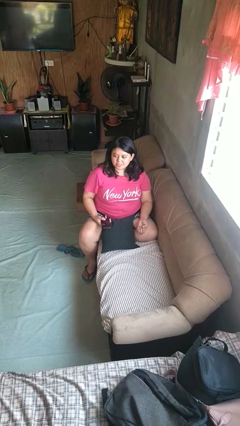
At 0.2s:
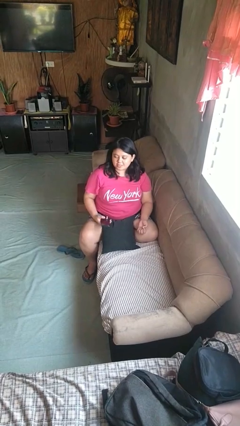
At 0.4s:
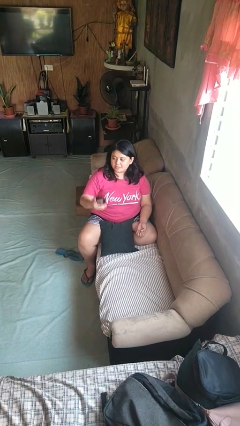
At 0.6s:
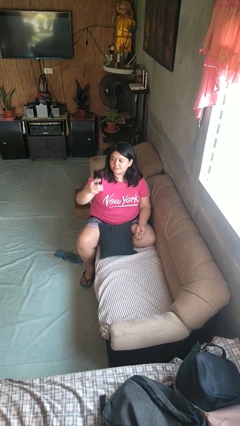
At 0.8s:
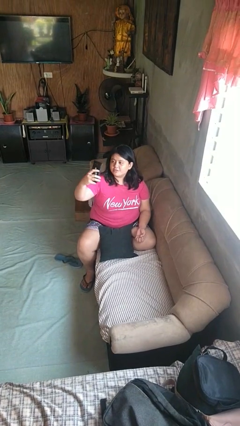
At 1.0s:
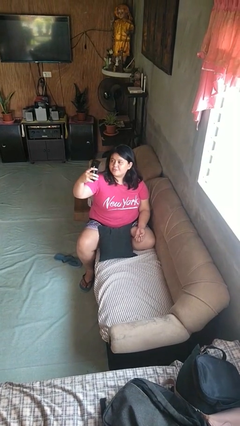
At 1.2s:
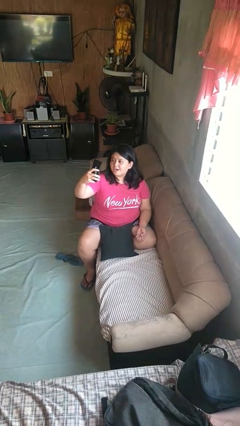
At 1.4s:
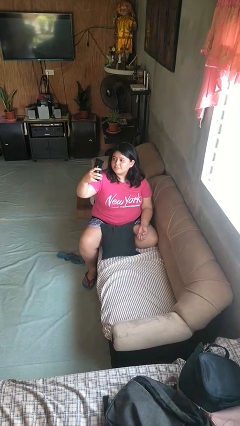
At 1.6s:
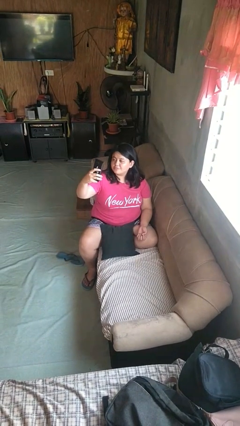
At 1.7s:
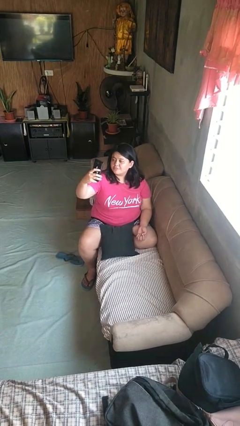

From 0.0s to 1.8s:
person takes selfie

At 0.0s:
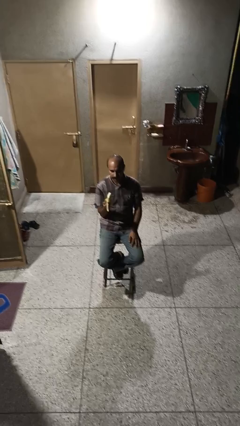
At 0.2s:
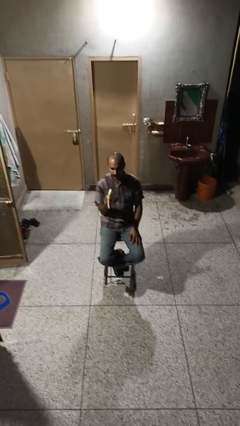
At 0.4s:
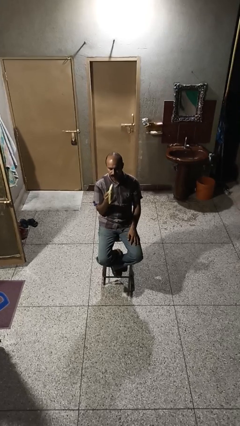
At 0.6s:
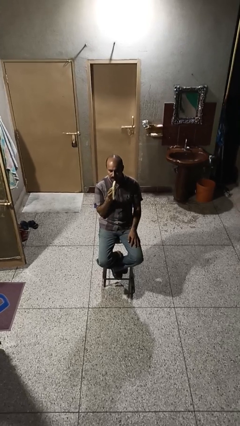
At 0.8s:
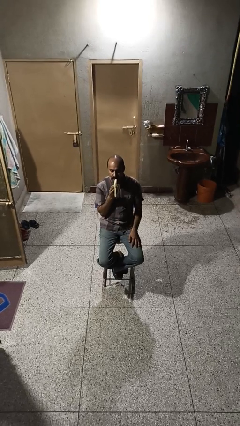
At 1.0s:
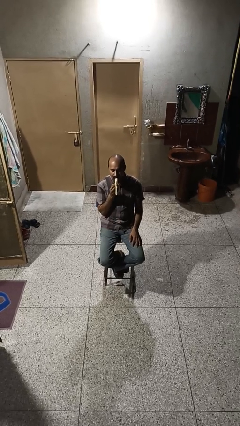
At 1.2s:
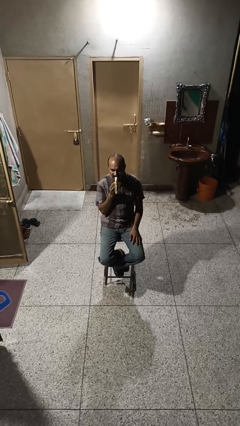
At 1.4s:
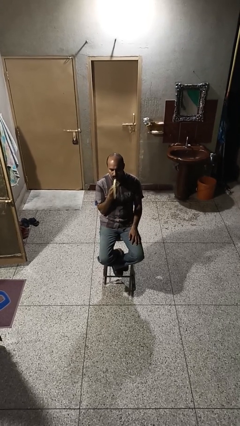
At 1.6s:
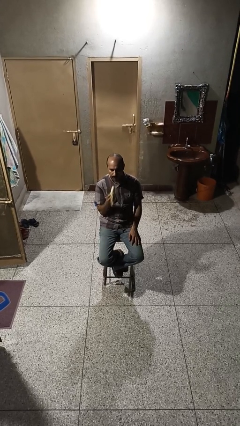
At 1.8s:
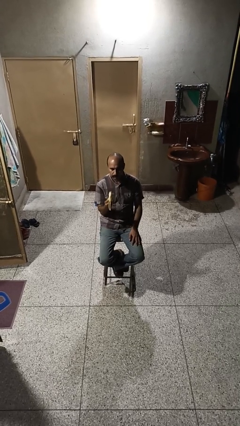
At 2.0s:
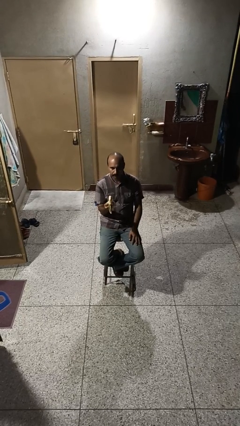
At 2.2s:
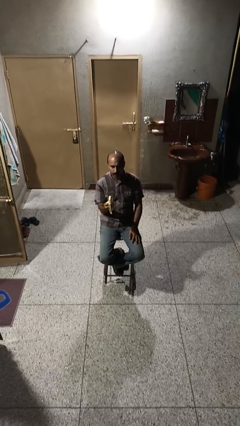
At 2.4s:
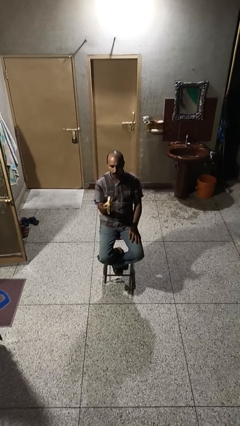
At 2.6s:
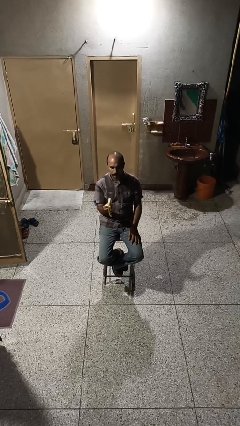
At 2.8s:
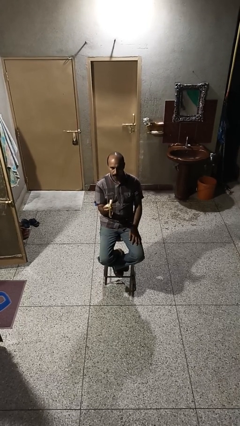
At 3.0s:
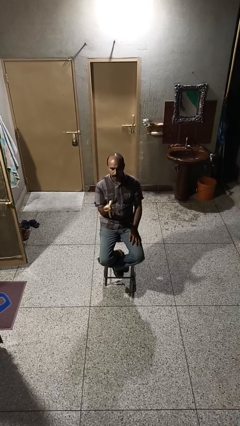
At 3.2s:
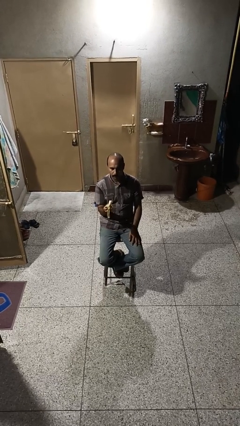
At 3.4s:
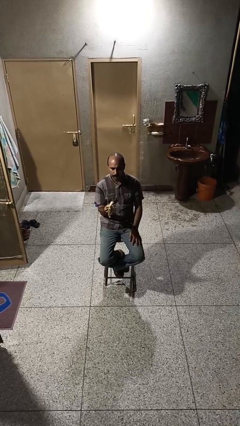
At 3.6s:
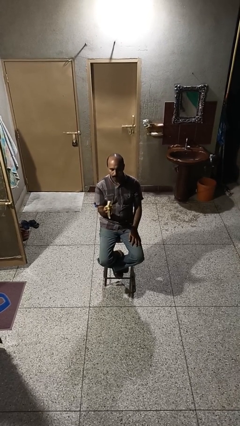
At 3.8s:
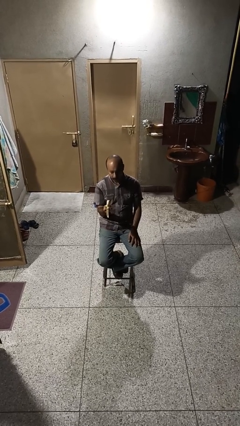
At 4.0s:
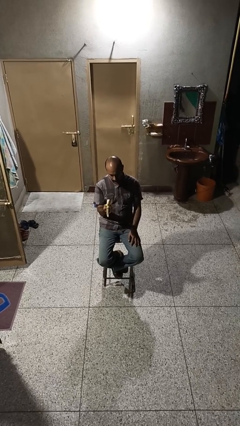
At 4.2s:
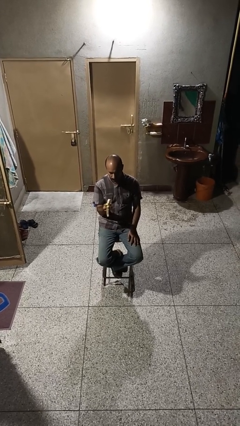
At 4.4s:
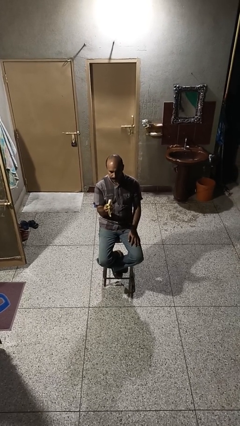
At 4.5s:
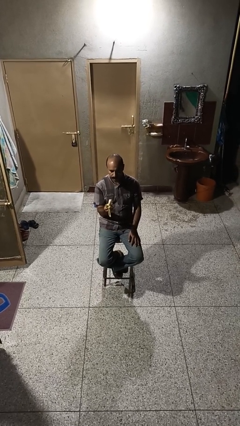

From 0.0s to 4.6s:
person eats banana

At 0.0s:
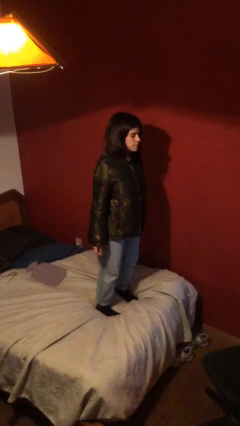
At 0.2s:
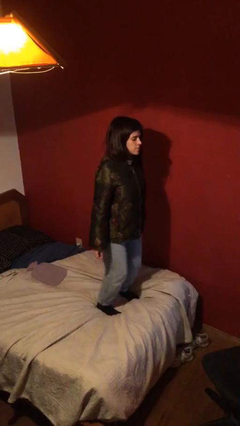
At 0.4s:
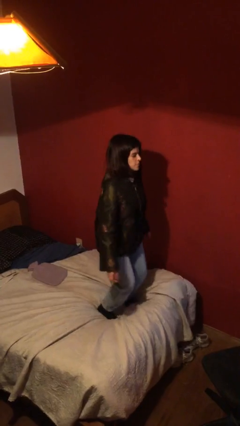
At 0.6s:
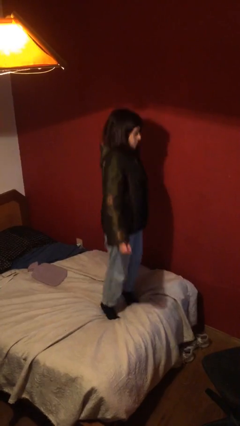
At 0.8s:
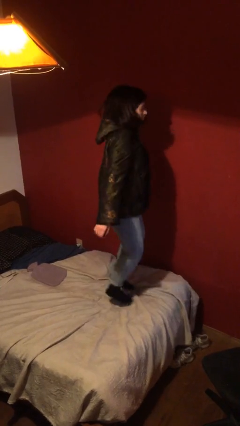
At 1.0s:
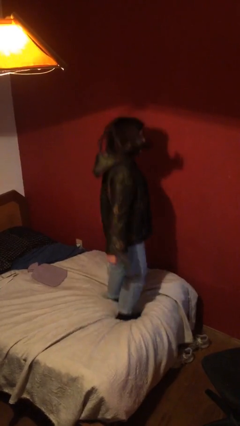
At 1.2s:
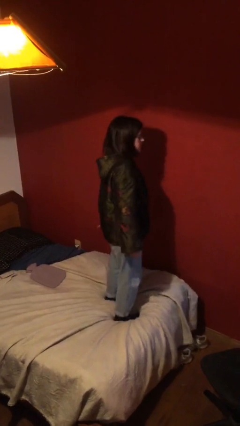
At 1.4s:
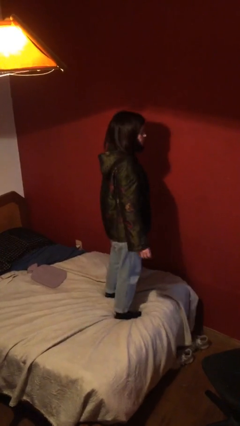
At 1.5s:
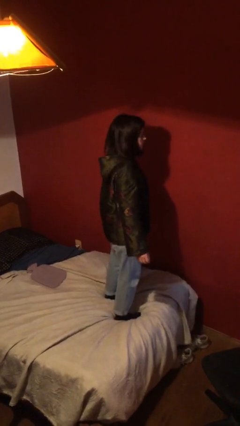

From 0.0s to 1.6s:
person jumps on bed

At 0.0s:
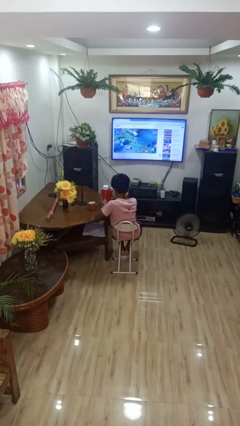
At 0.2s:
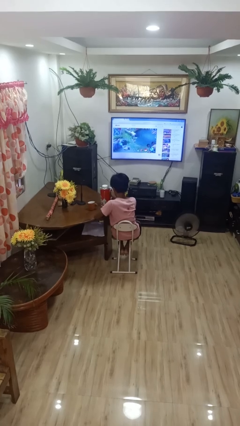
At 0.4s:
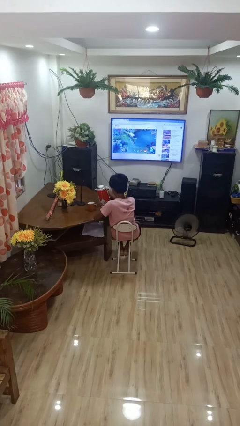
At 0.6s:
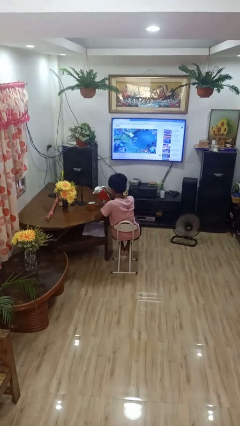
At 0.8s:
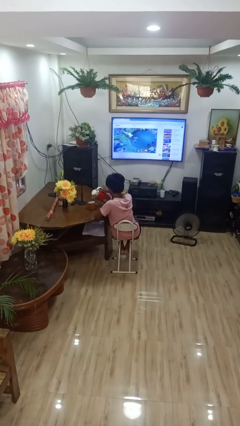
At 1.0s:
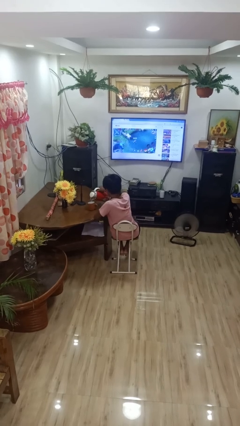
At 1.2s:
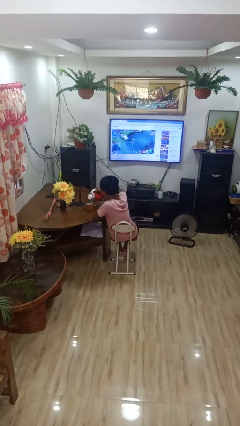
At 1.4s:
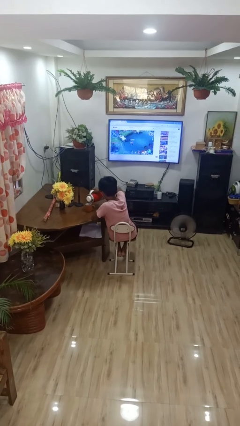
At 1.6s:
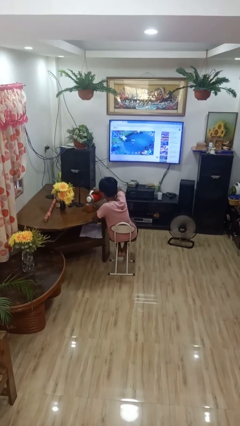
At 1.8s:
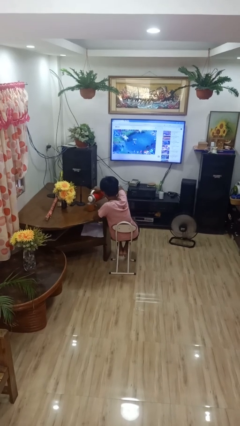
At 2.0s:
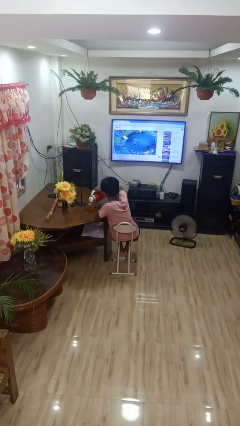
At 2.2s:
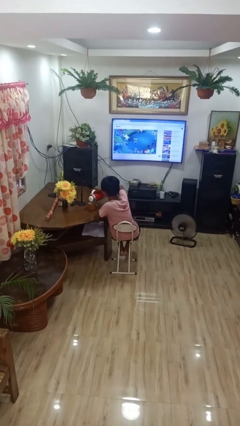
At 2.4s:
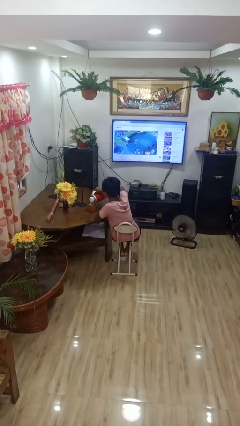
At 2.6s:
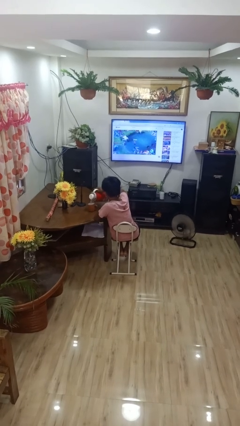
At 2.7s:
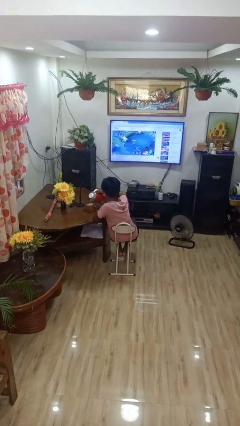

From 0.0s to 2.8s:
person pours coffee into mug

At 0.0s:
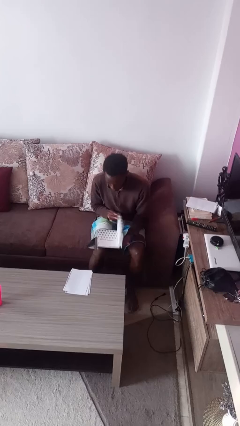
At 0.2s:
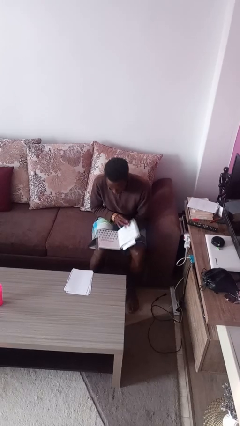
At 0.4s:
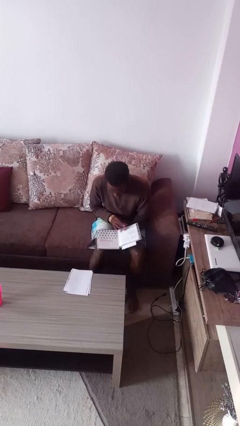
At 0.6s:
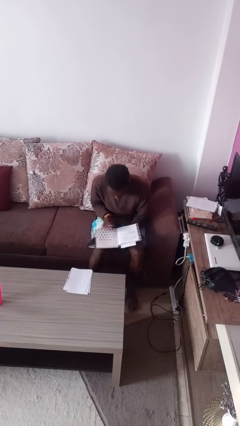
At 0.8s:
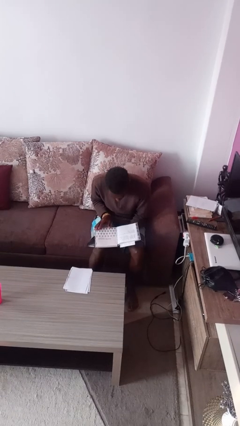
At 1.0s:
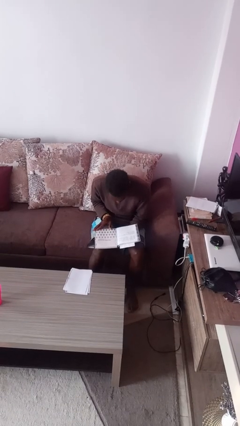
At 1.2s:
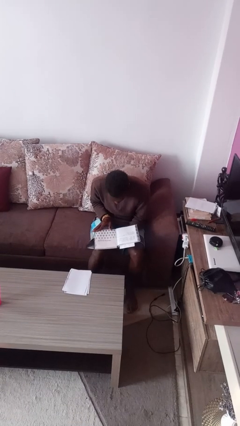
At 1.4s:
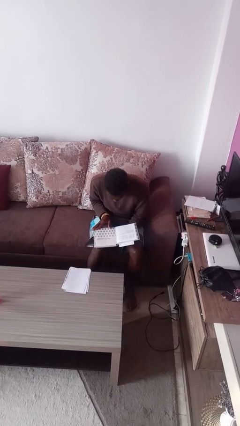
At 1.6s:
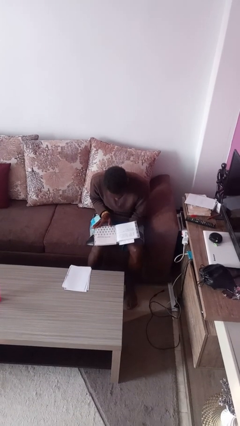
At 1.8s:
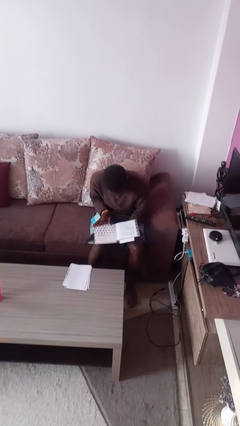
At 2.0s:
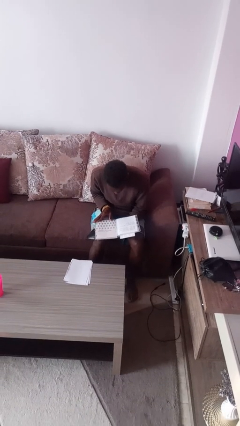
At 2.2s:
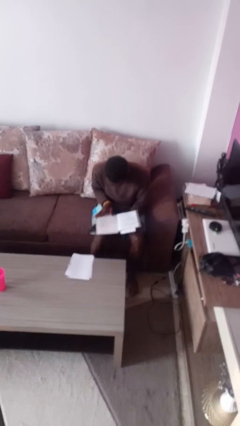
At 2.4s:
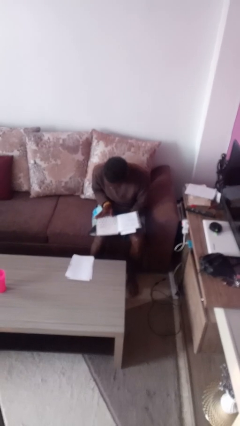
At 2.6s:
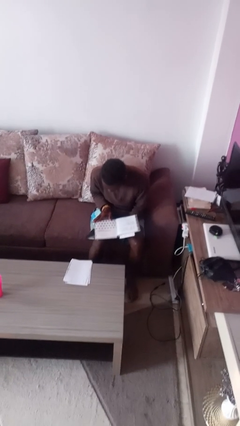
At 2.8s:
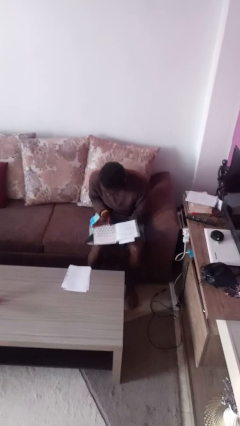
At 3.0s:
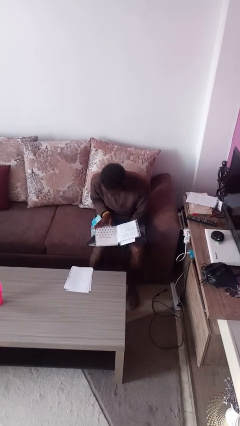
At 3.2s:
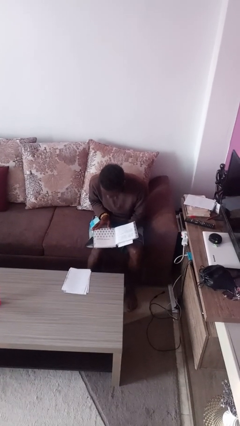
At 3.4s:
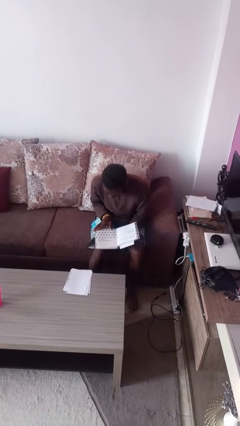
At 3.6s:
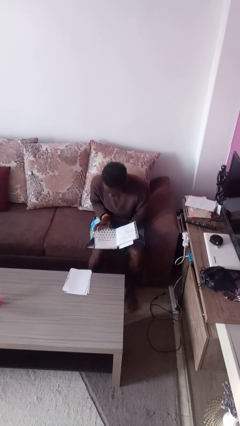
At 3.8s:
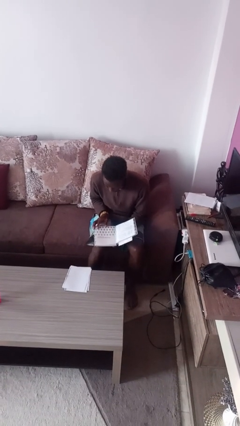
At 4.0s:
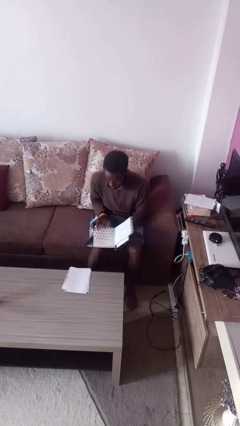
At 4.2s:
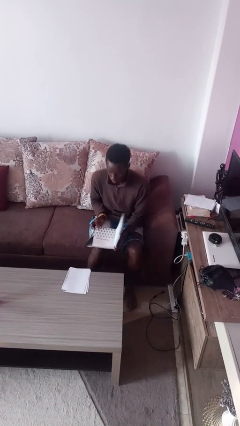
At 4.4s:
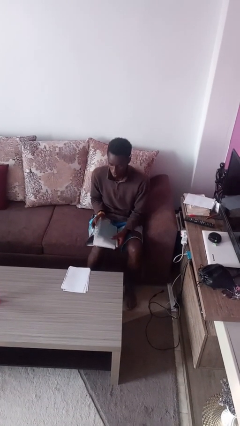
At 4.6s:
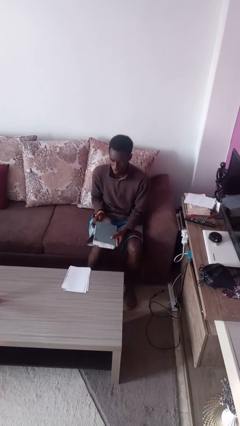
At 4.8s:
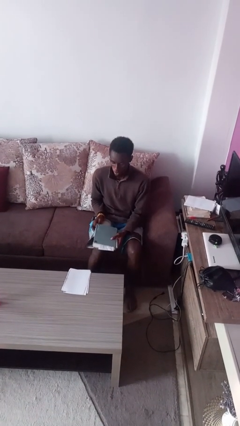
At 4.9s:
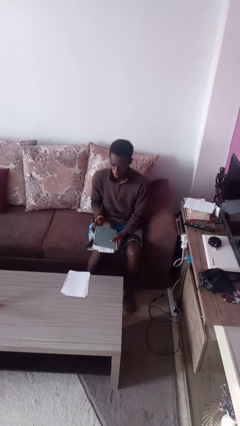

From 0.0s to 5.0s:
person reads book

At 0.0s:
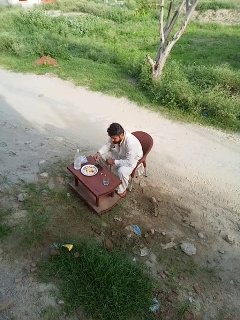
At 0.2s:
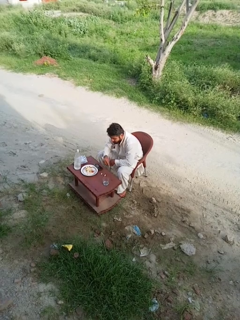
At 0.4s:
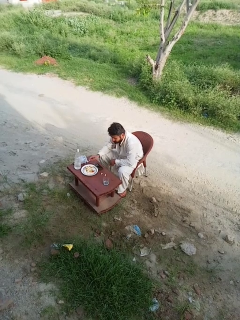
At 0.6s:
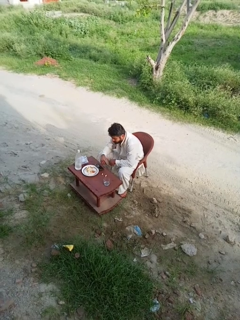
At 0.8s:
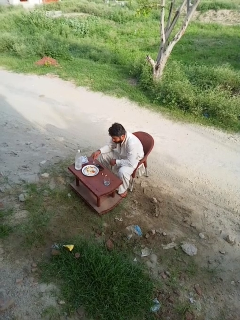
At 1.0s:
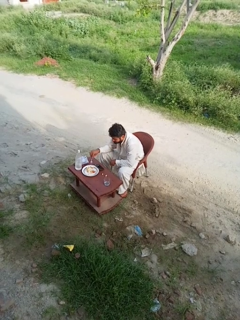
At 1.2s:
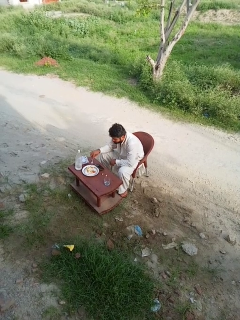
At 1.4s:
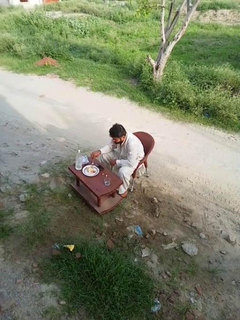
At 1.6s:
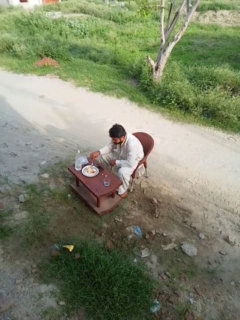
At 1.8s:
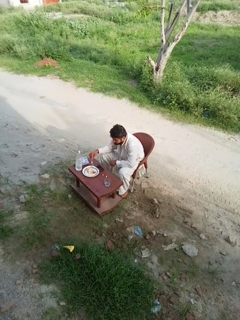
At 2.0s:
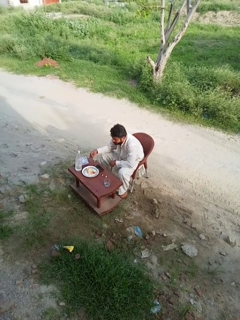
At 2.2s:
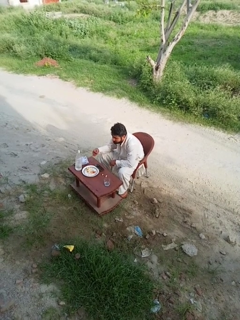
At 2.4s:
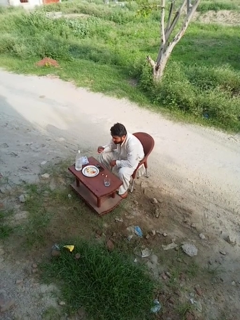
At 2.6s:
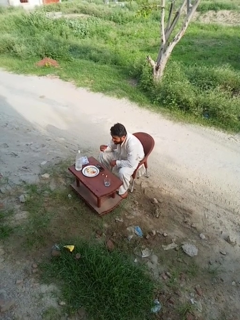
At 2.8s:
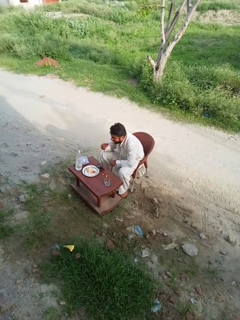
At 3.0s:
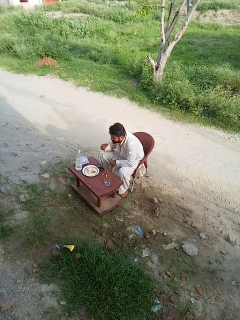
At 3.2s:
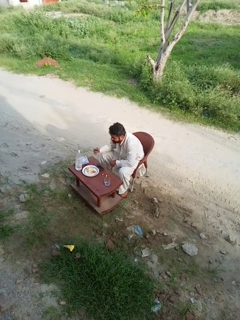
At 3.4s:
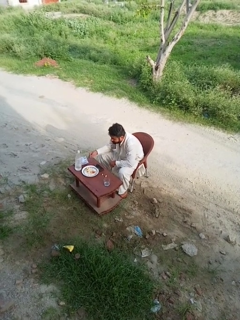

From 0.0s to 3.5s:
person eats with utensil
